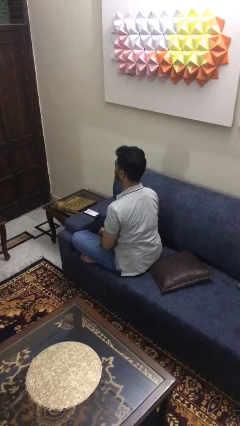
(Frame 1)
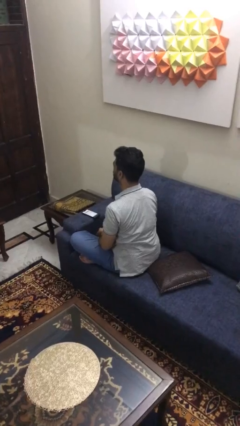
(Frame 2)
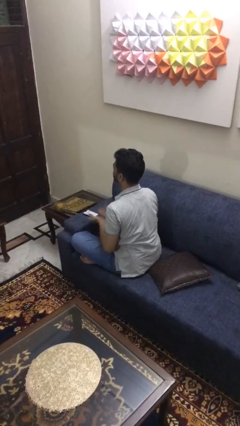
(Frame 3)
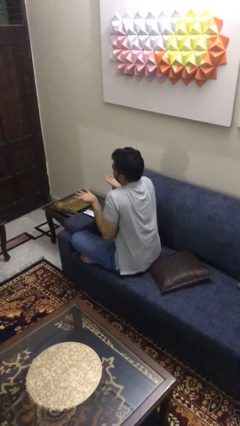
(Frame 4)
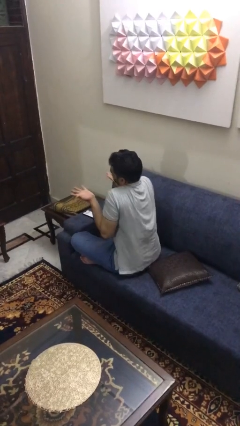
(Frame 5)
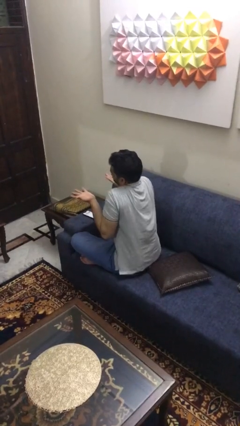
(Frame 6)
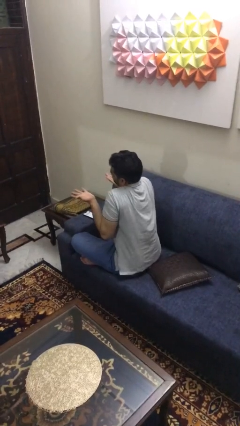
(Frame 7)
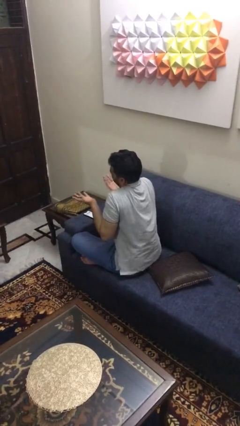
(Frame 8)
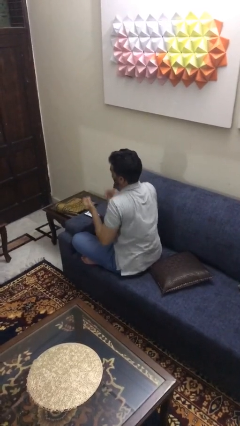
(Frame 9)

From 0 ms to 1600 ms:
person shrugs

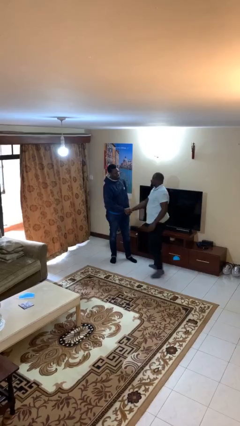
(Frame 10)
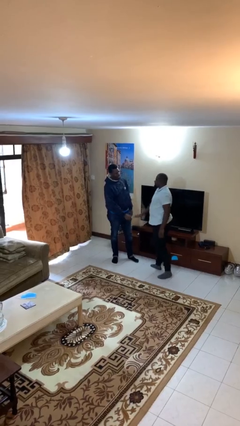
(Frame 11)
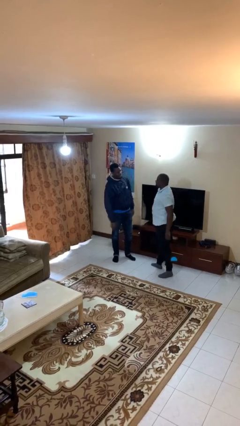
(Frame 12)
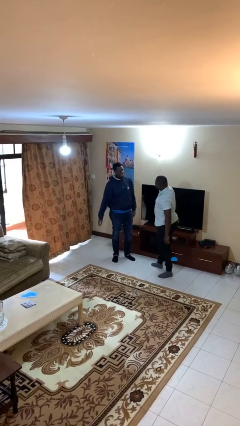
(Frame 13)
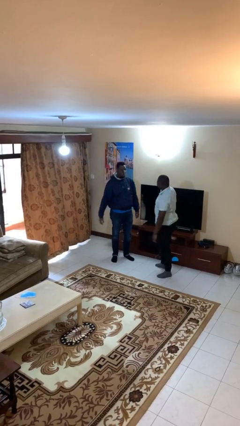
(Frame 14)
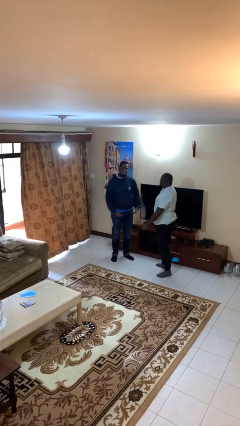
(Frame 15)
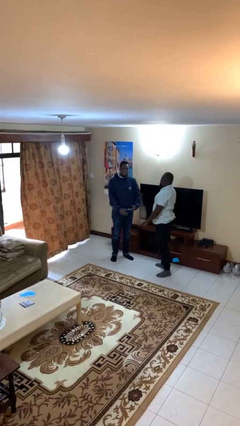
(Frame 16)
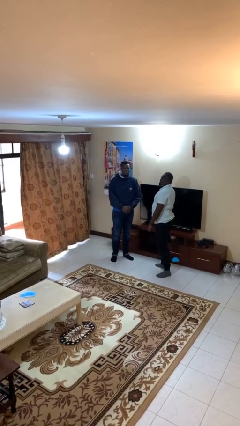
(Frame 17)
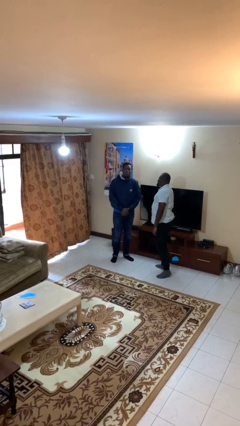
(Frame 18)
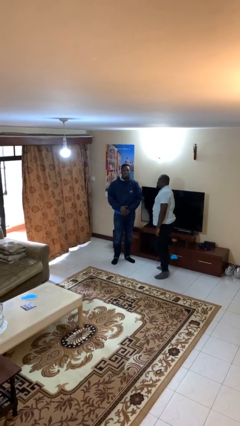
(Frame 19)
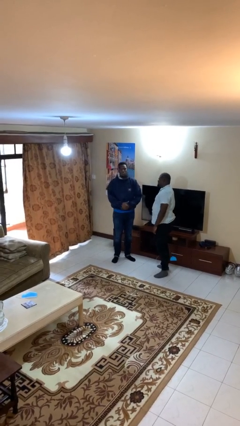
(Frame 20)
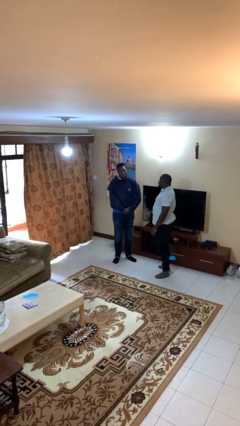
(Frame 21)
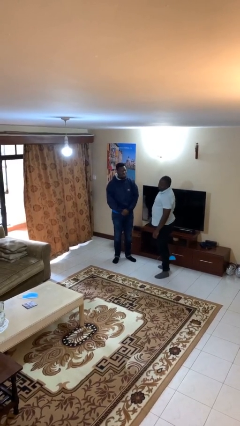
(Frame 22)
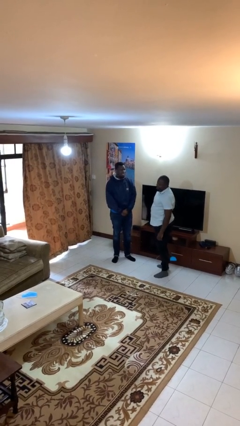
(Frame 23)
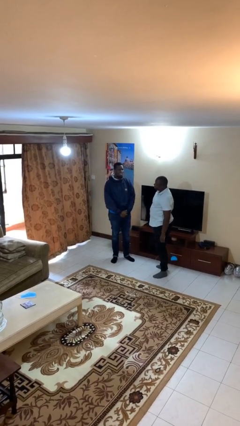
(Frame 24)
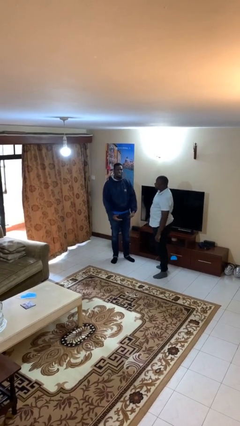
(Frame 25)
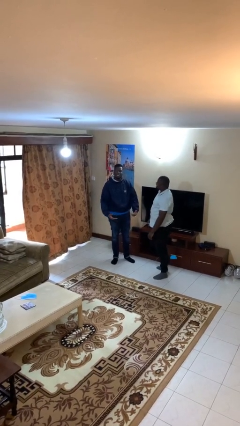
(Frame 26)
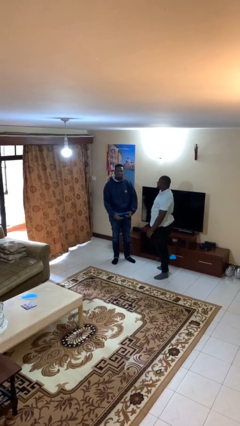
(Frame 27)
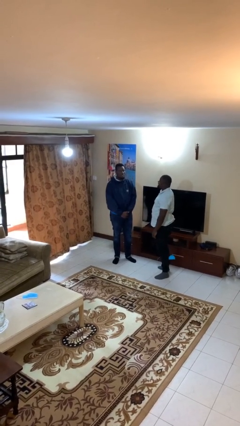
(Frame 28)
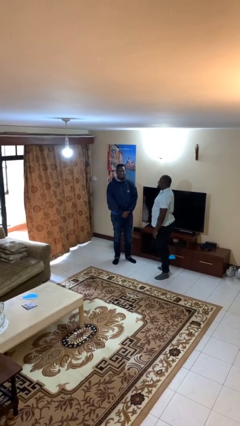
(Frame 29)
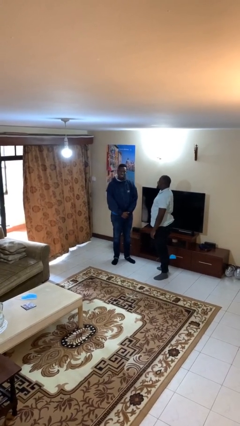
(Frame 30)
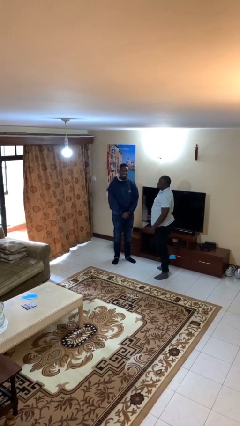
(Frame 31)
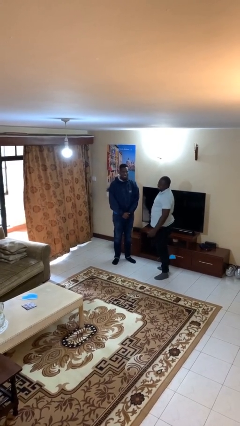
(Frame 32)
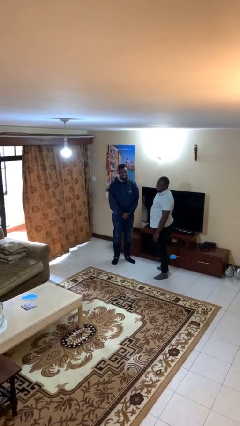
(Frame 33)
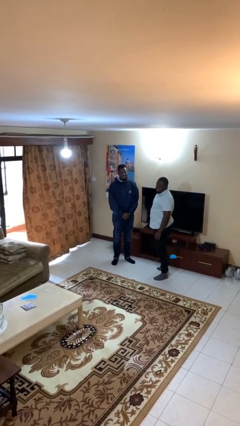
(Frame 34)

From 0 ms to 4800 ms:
person talks to person

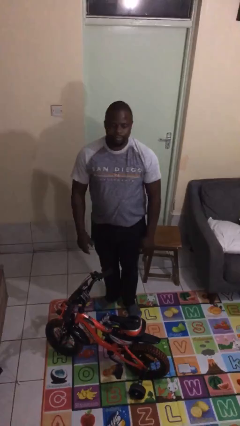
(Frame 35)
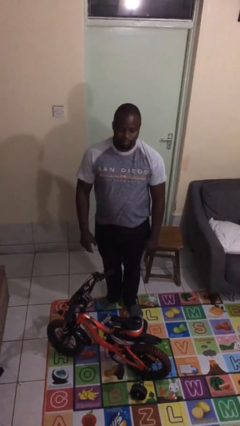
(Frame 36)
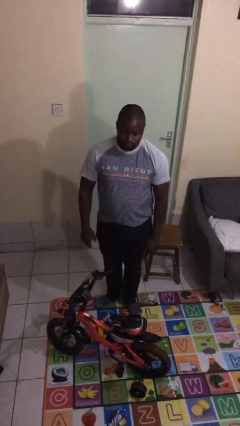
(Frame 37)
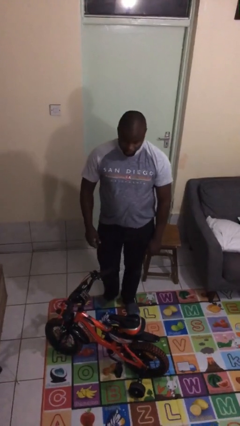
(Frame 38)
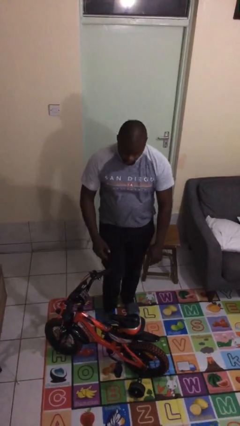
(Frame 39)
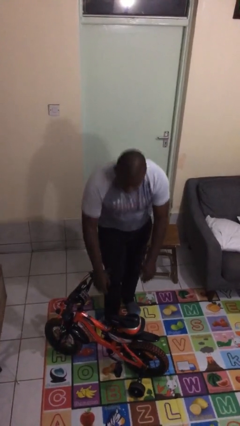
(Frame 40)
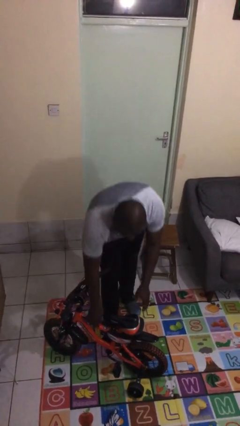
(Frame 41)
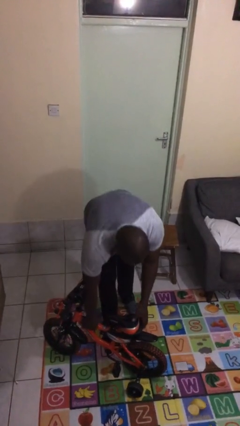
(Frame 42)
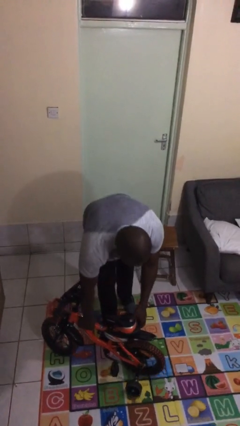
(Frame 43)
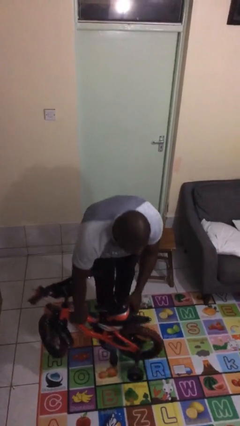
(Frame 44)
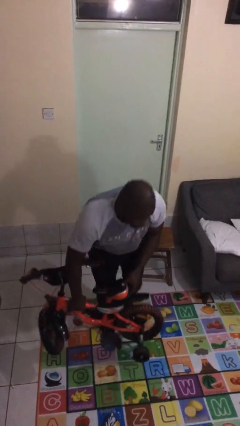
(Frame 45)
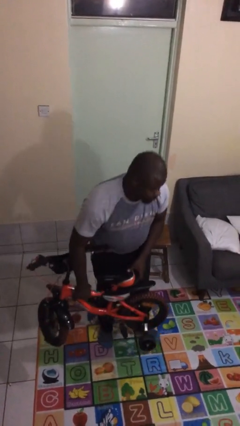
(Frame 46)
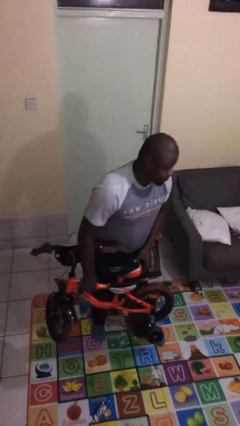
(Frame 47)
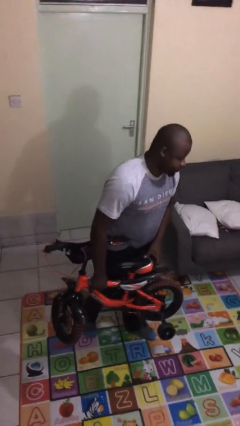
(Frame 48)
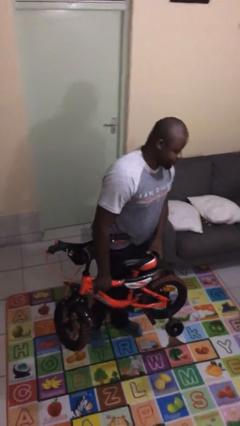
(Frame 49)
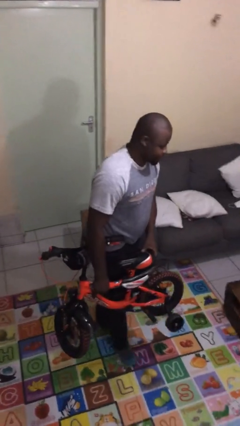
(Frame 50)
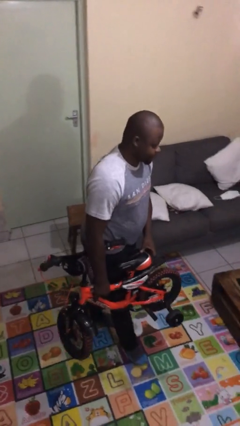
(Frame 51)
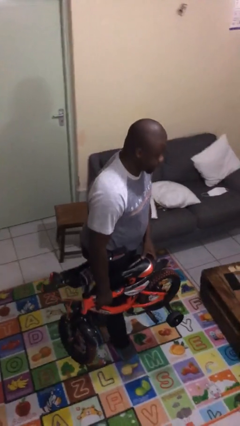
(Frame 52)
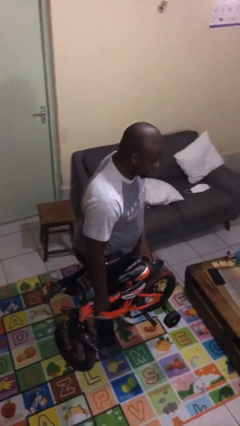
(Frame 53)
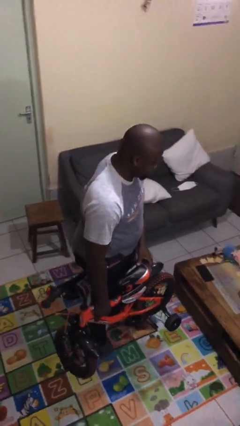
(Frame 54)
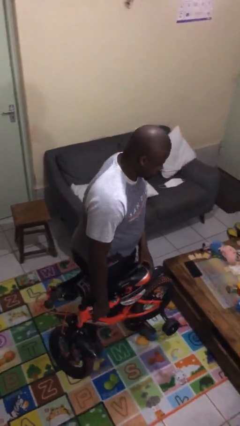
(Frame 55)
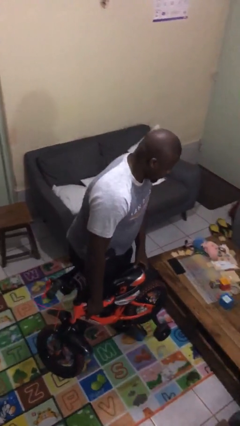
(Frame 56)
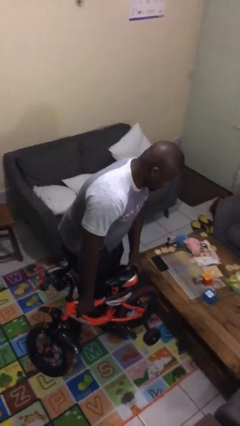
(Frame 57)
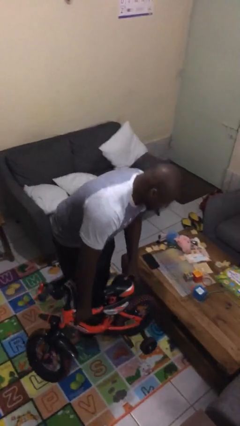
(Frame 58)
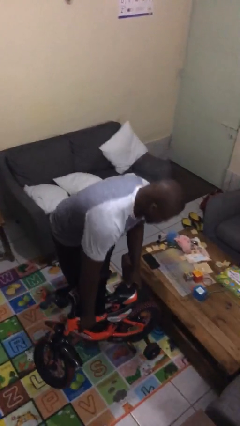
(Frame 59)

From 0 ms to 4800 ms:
person carries bicycle

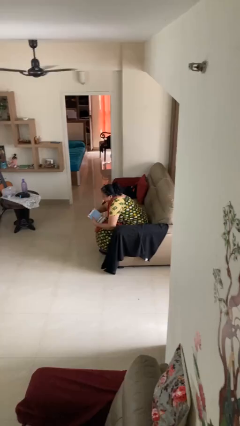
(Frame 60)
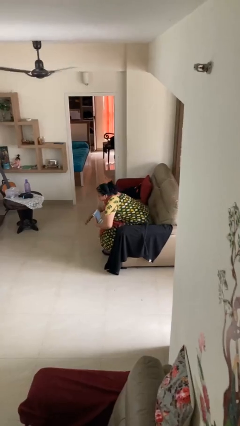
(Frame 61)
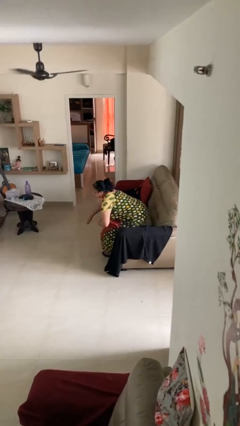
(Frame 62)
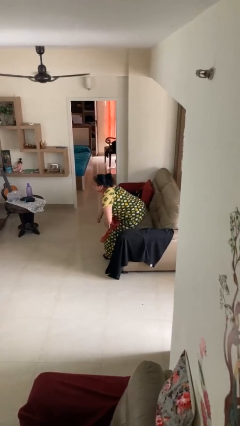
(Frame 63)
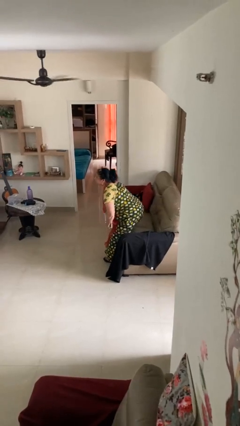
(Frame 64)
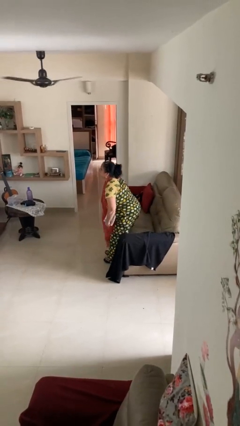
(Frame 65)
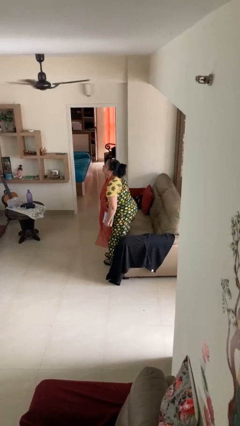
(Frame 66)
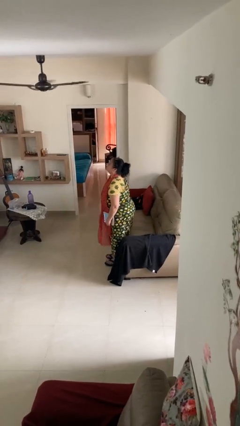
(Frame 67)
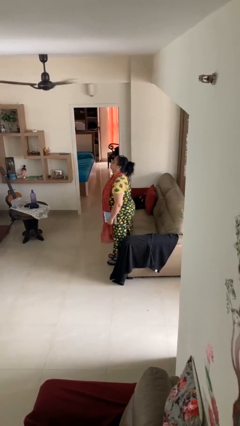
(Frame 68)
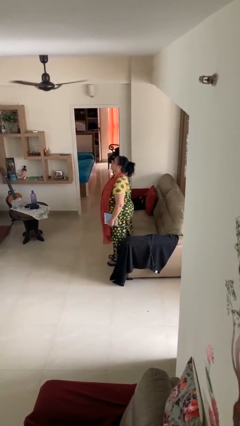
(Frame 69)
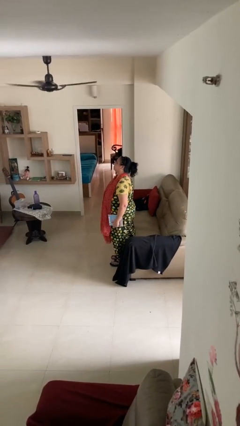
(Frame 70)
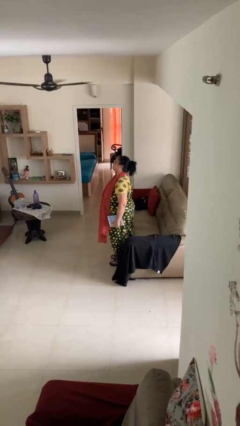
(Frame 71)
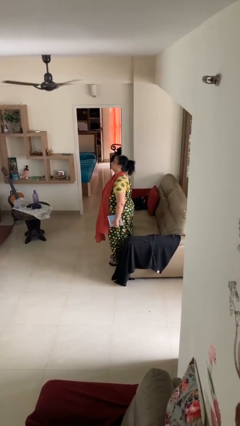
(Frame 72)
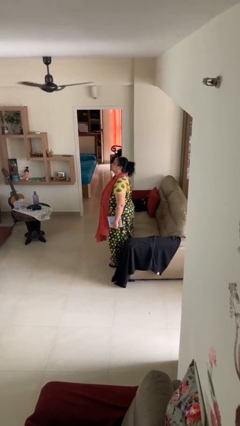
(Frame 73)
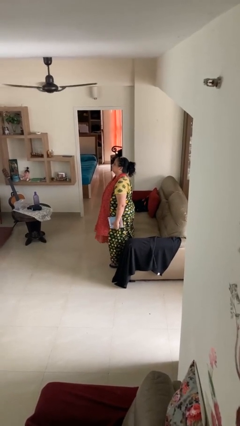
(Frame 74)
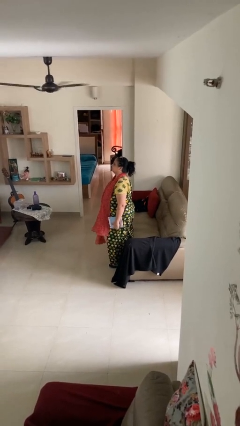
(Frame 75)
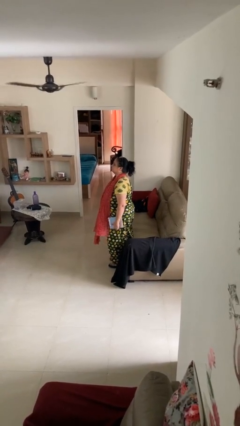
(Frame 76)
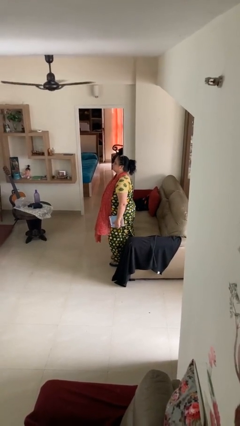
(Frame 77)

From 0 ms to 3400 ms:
person stands up

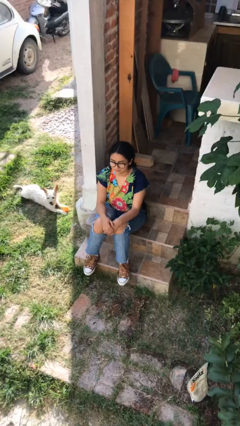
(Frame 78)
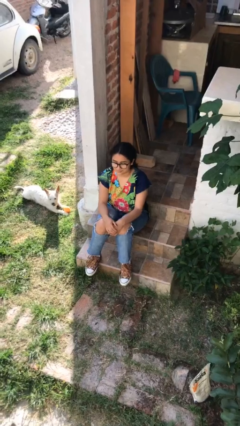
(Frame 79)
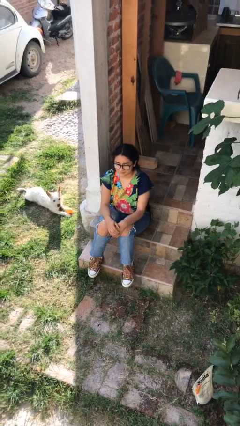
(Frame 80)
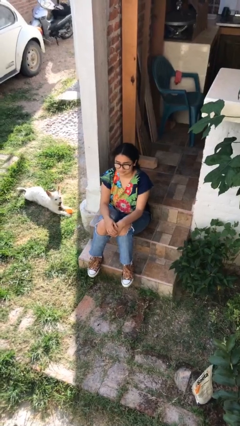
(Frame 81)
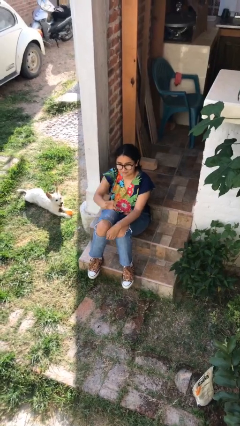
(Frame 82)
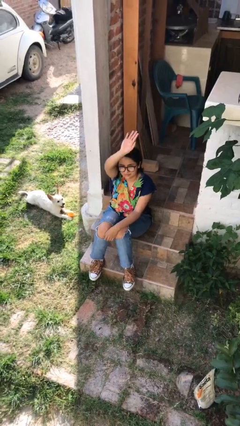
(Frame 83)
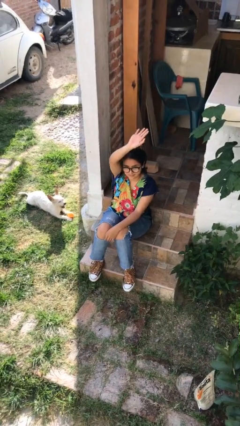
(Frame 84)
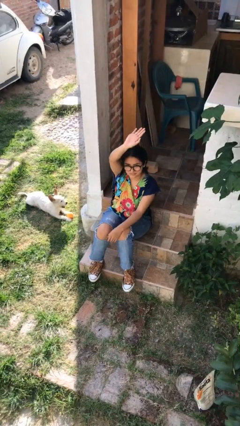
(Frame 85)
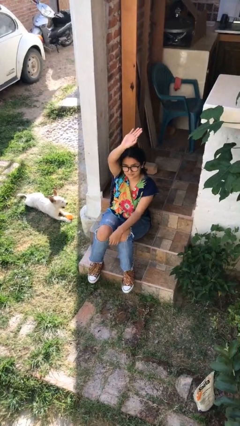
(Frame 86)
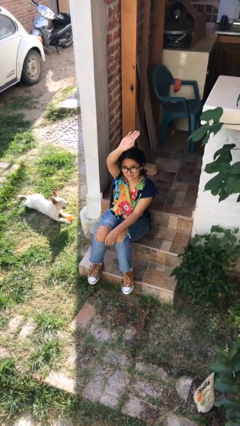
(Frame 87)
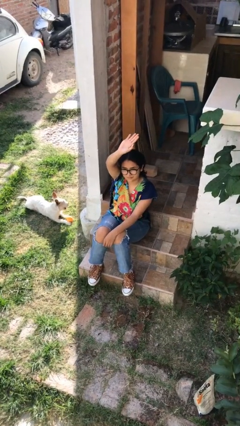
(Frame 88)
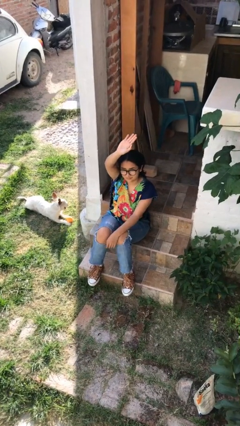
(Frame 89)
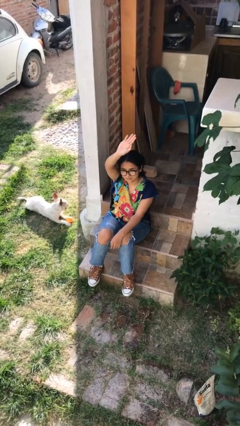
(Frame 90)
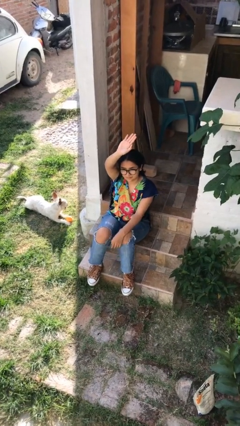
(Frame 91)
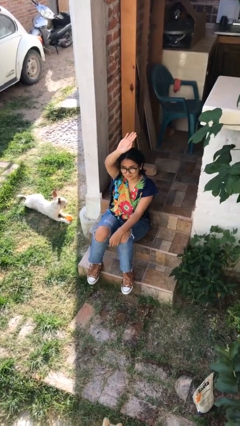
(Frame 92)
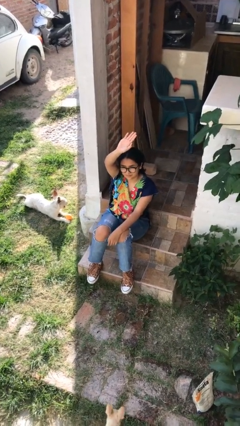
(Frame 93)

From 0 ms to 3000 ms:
person gestures raise hand

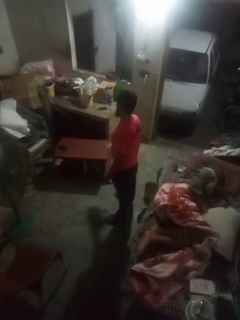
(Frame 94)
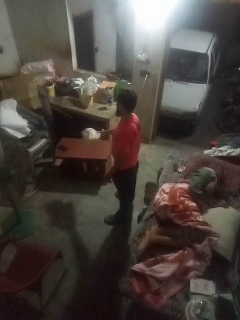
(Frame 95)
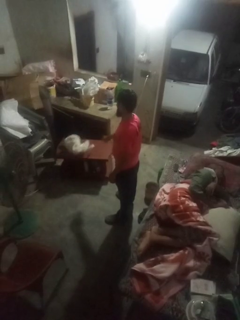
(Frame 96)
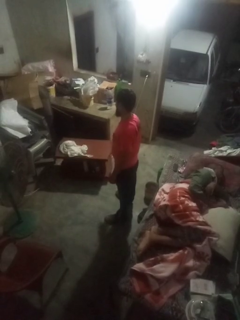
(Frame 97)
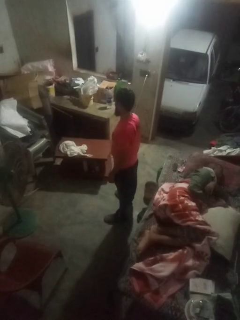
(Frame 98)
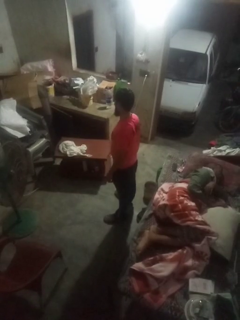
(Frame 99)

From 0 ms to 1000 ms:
person throws object on table
